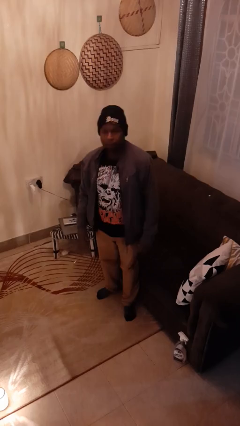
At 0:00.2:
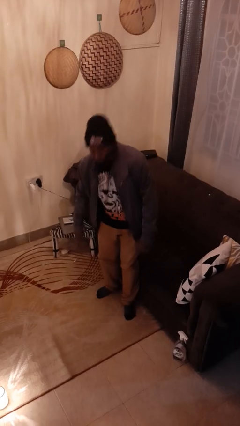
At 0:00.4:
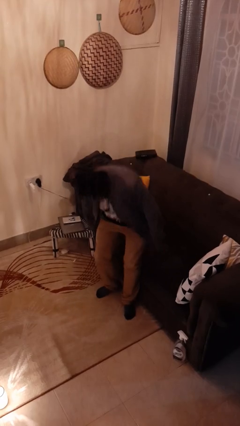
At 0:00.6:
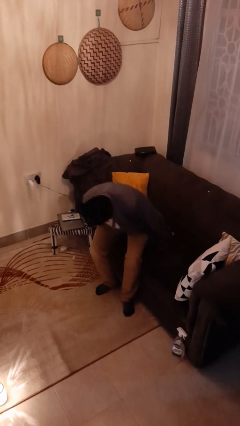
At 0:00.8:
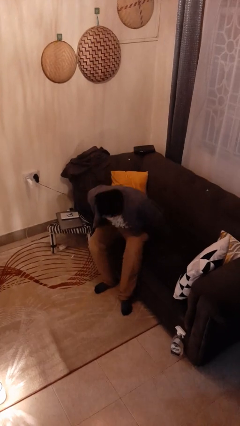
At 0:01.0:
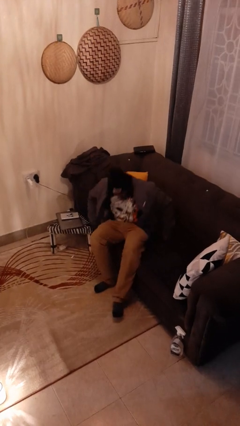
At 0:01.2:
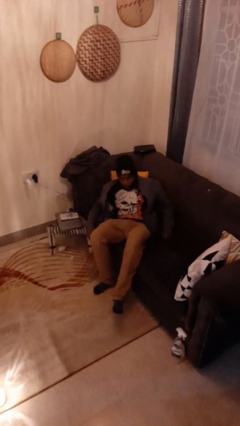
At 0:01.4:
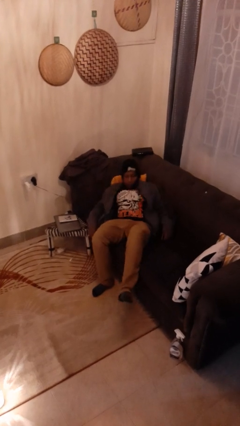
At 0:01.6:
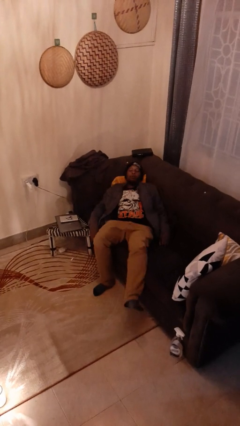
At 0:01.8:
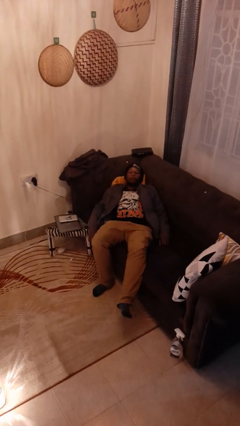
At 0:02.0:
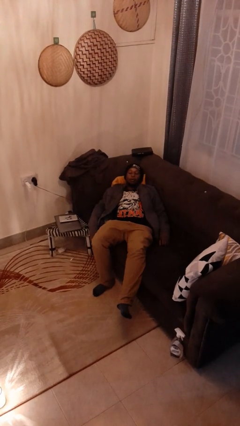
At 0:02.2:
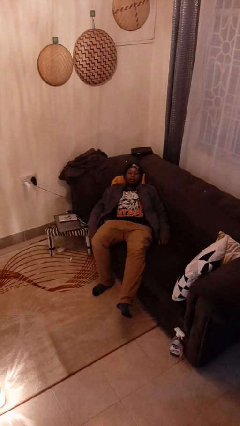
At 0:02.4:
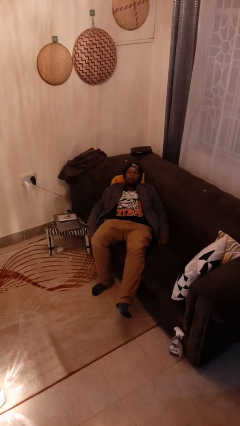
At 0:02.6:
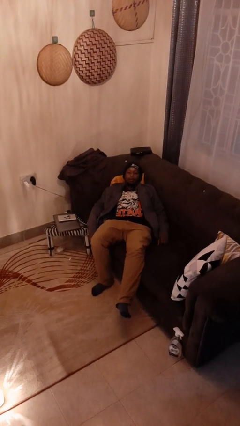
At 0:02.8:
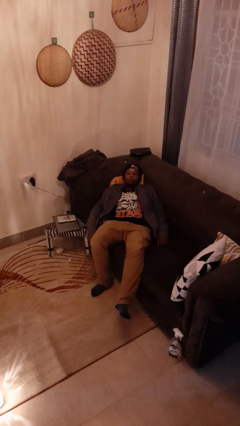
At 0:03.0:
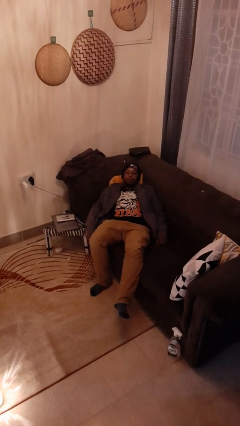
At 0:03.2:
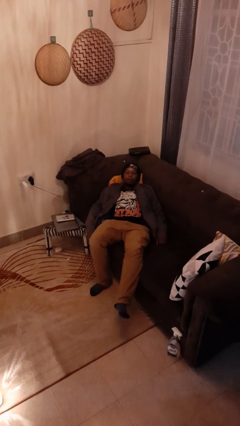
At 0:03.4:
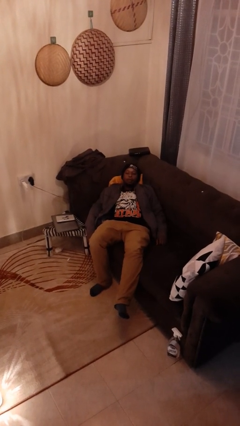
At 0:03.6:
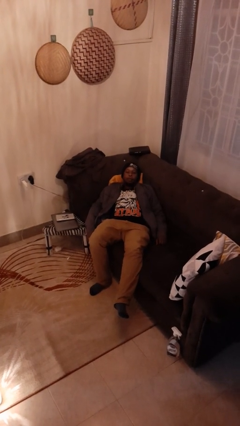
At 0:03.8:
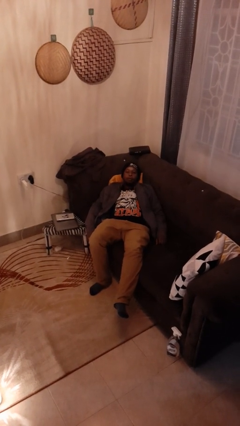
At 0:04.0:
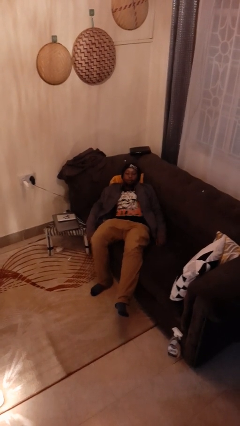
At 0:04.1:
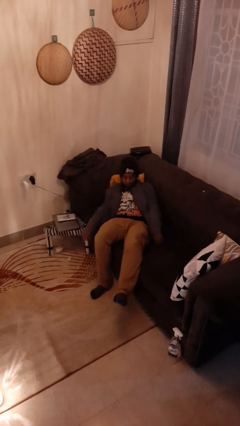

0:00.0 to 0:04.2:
person lies down on couch

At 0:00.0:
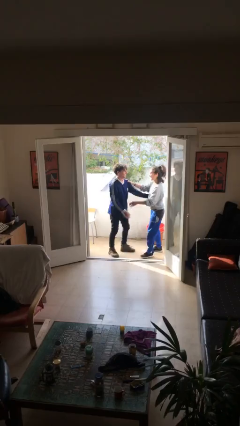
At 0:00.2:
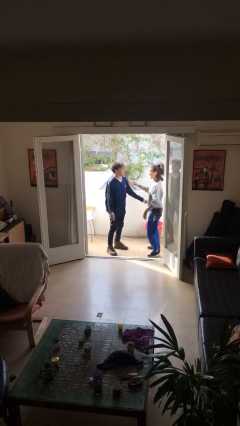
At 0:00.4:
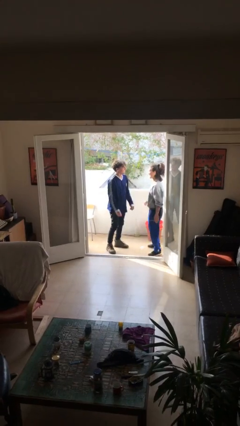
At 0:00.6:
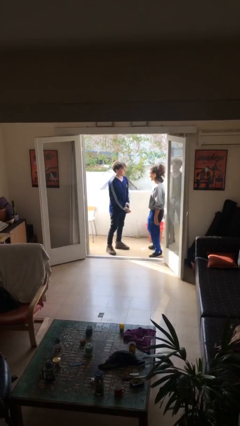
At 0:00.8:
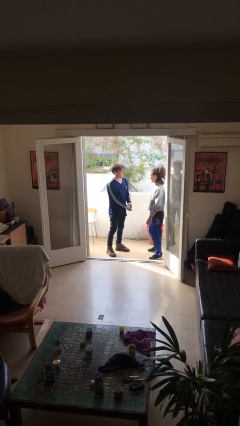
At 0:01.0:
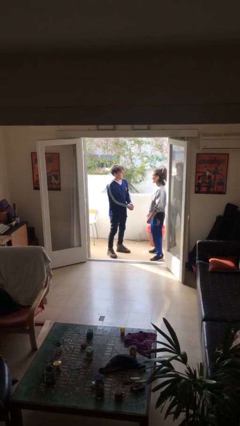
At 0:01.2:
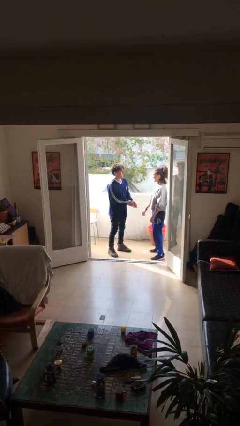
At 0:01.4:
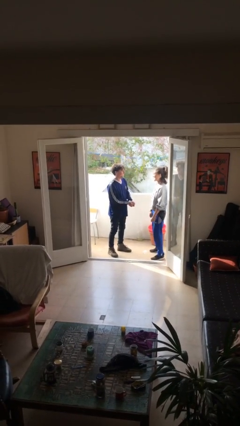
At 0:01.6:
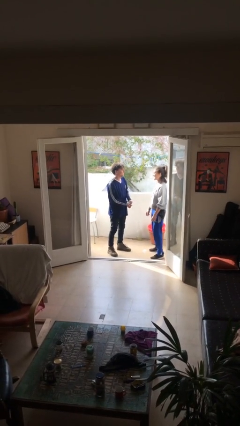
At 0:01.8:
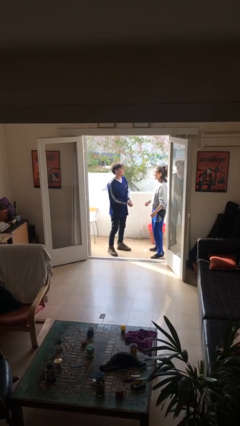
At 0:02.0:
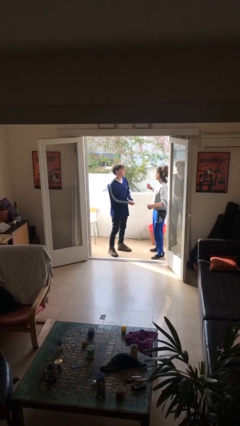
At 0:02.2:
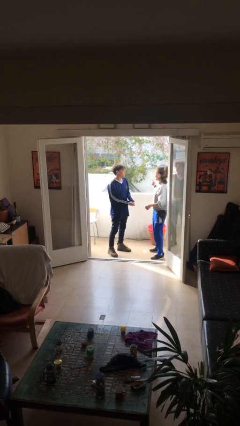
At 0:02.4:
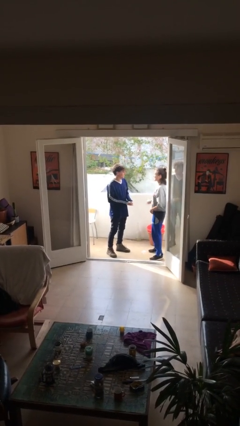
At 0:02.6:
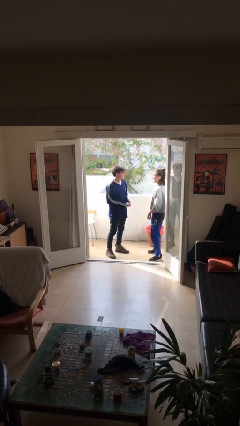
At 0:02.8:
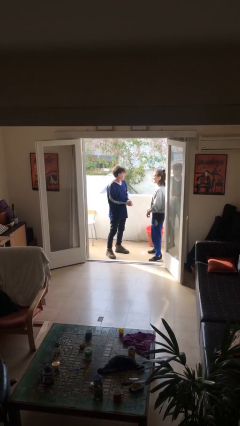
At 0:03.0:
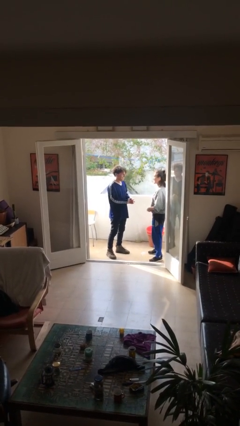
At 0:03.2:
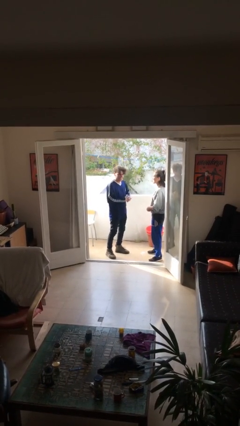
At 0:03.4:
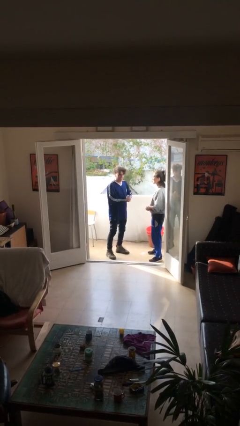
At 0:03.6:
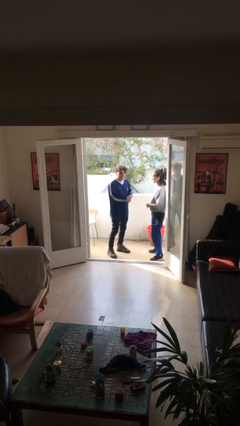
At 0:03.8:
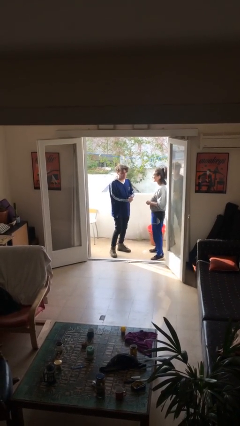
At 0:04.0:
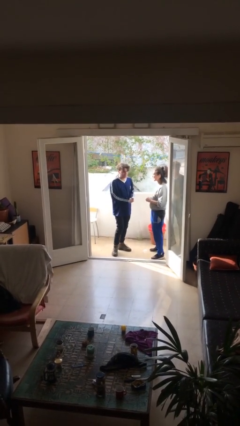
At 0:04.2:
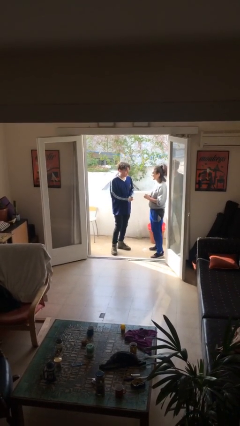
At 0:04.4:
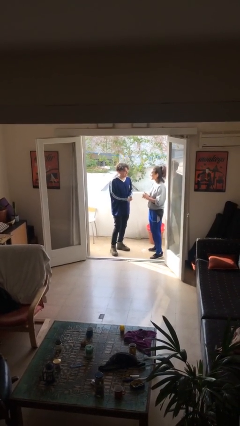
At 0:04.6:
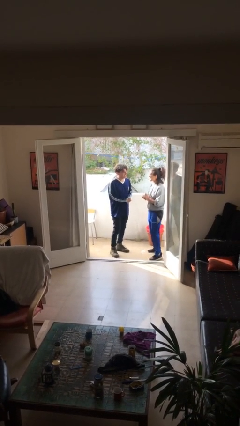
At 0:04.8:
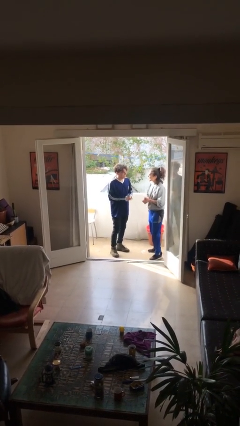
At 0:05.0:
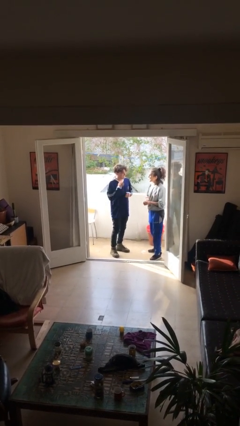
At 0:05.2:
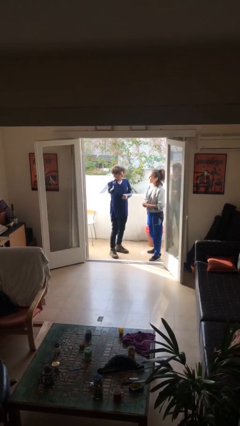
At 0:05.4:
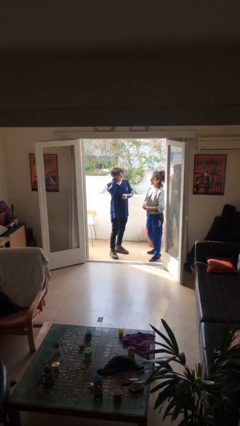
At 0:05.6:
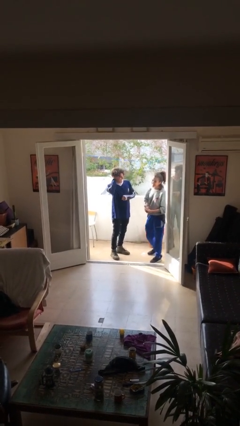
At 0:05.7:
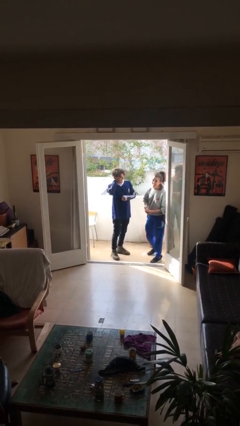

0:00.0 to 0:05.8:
person talks to person

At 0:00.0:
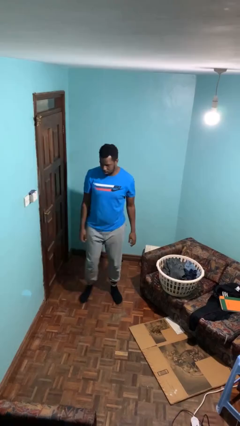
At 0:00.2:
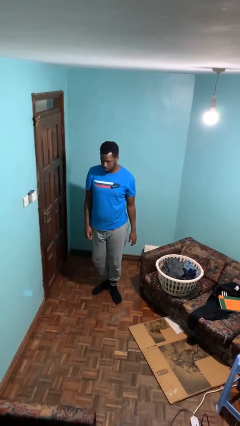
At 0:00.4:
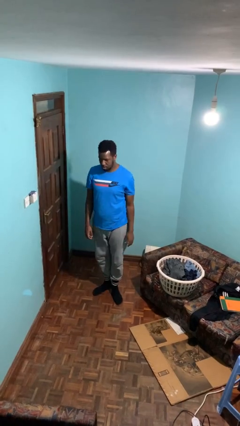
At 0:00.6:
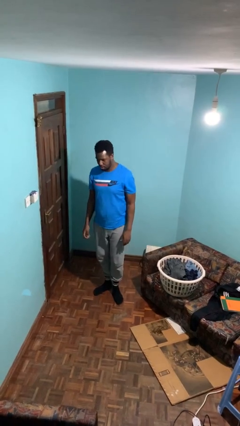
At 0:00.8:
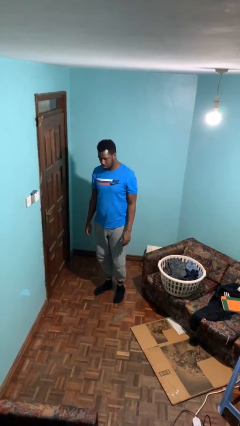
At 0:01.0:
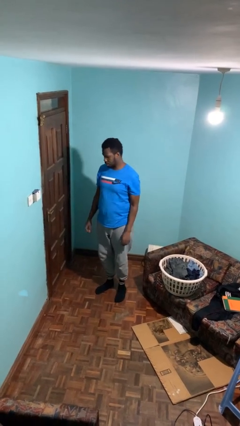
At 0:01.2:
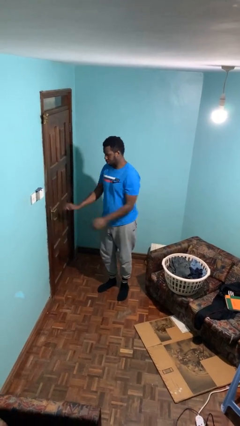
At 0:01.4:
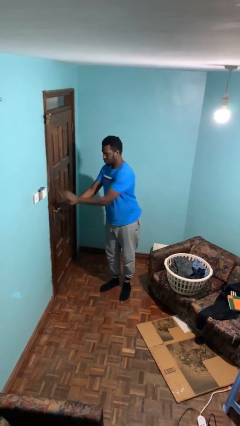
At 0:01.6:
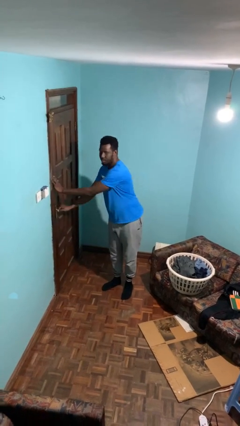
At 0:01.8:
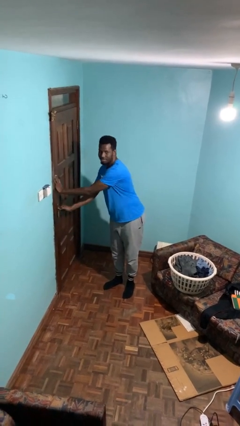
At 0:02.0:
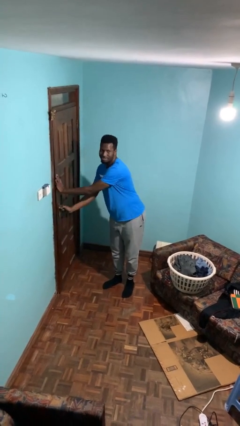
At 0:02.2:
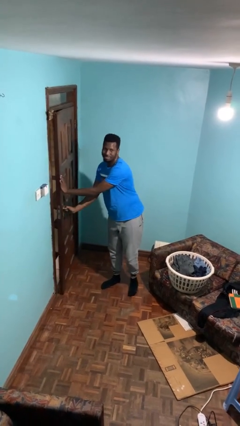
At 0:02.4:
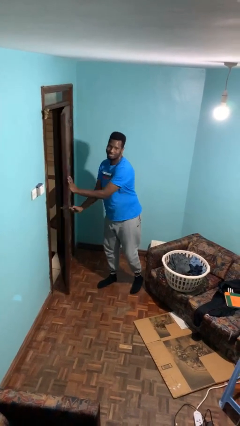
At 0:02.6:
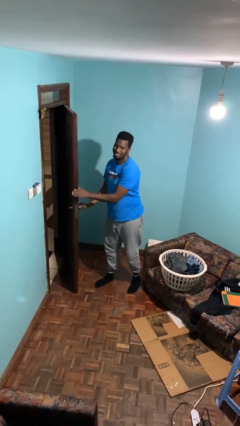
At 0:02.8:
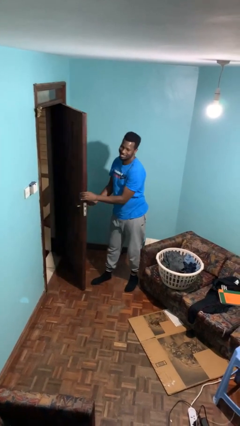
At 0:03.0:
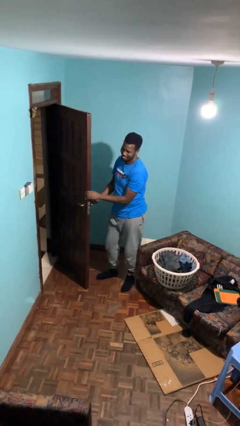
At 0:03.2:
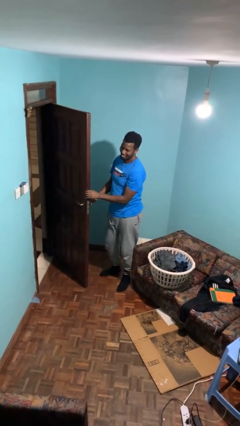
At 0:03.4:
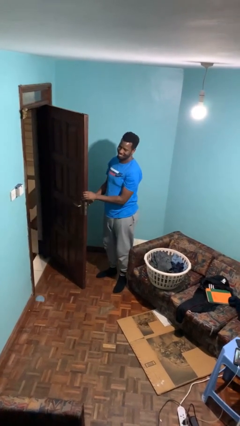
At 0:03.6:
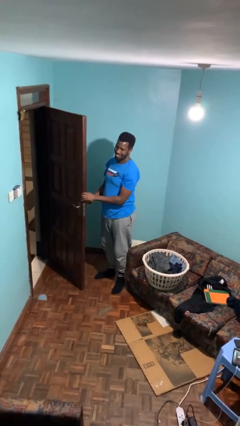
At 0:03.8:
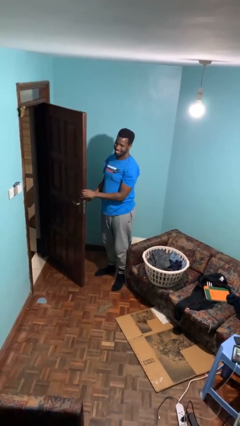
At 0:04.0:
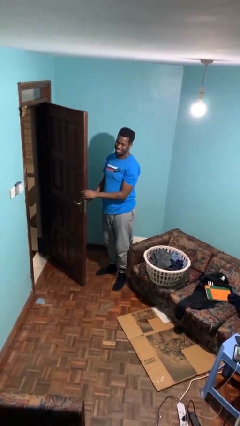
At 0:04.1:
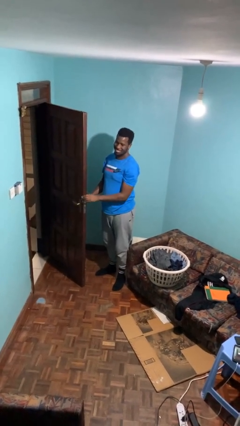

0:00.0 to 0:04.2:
person opens facility door

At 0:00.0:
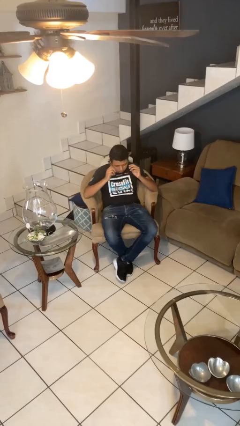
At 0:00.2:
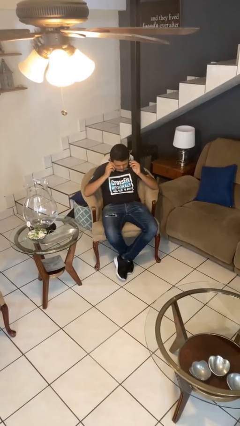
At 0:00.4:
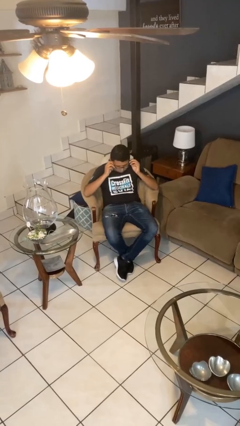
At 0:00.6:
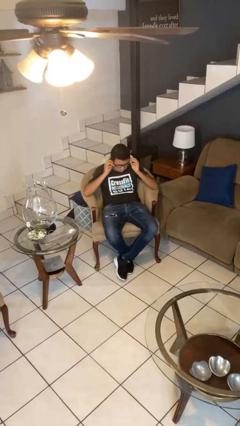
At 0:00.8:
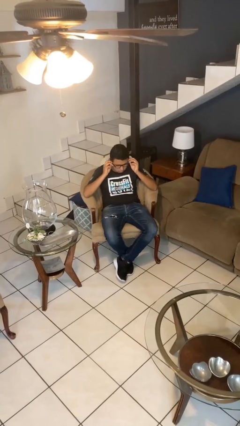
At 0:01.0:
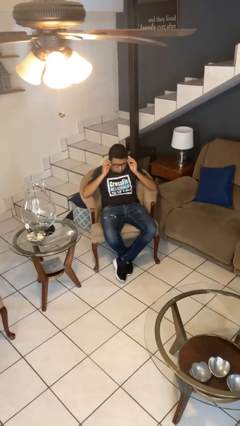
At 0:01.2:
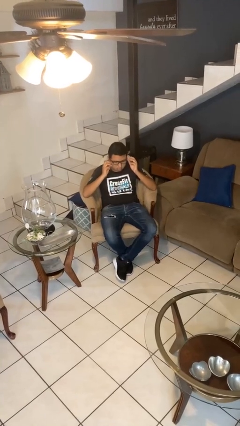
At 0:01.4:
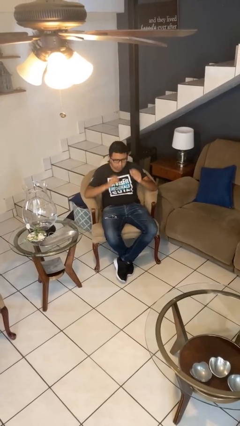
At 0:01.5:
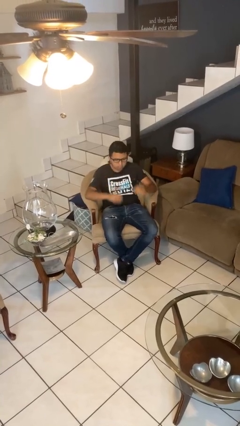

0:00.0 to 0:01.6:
person puts on glasses

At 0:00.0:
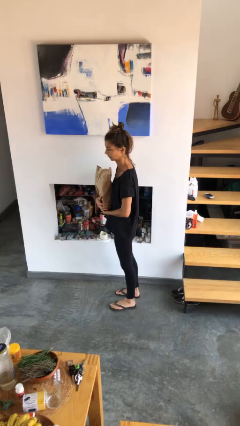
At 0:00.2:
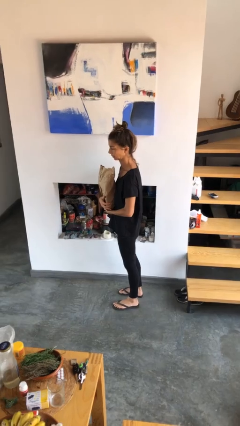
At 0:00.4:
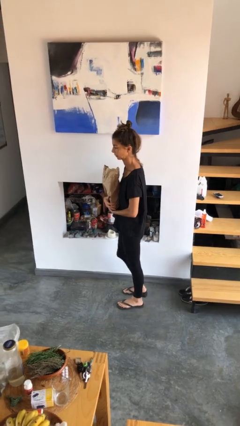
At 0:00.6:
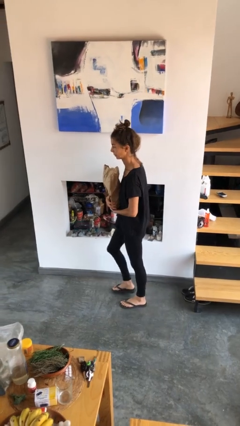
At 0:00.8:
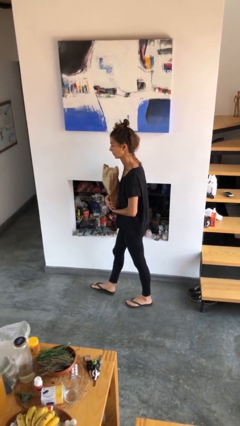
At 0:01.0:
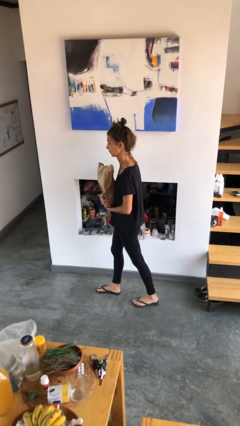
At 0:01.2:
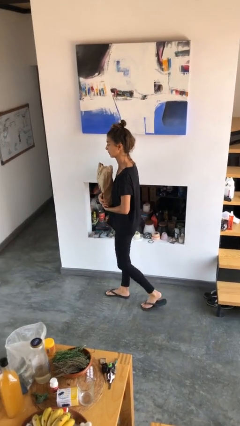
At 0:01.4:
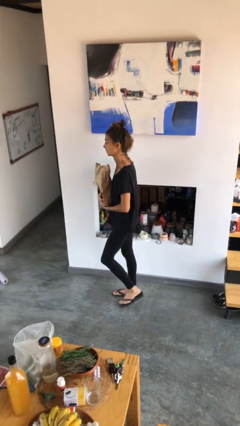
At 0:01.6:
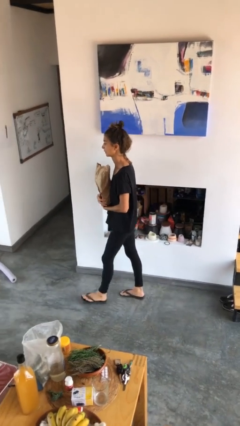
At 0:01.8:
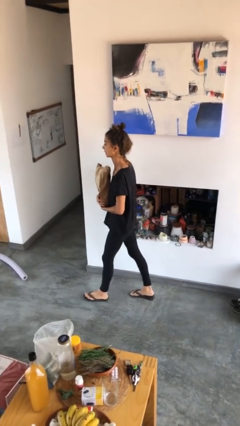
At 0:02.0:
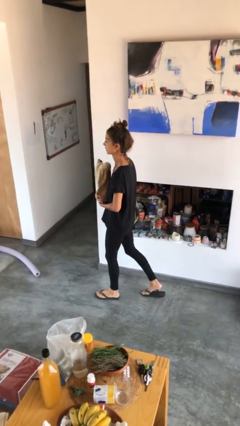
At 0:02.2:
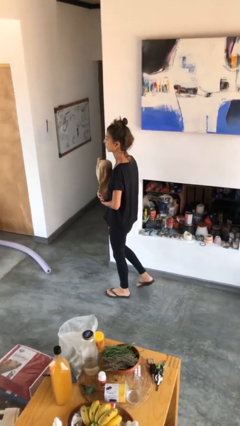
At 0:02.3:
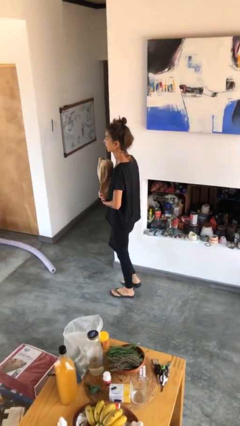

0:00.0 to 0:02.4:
person carries groceries
